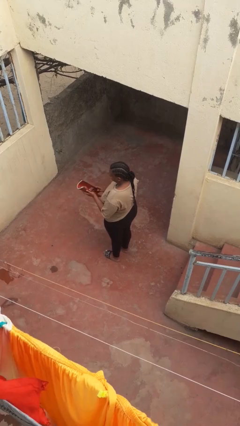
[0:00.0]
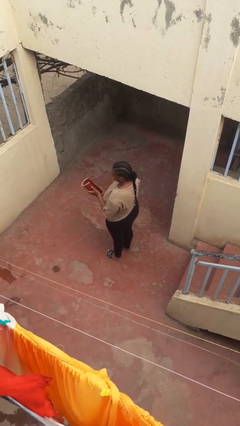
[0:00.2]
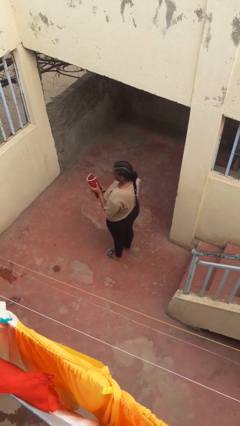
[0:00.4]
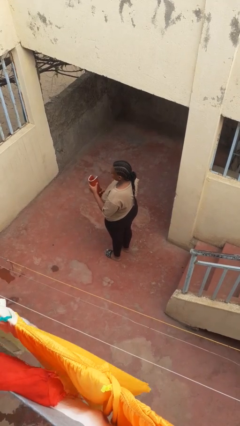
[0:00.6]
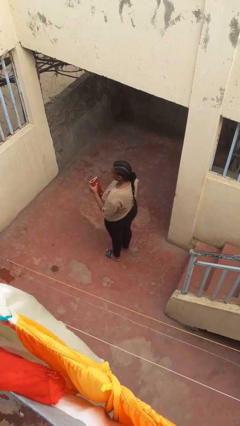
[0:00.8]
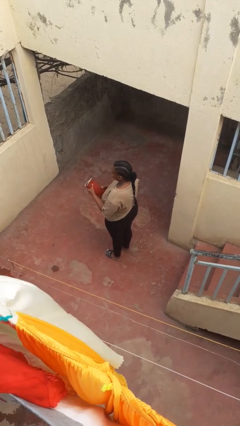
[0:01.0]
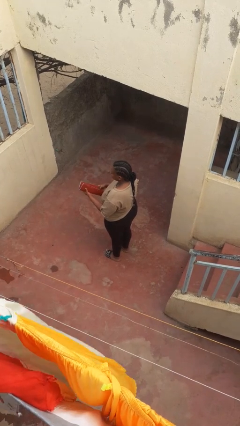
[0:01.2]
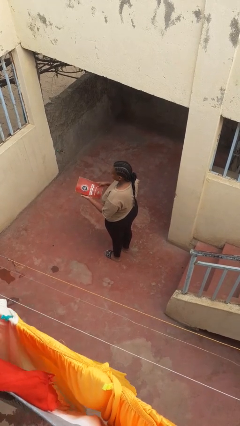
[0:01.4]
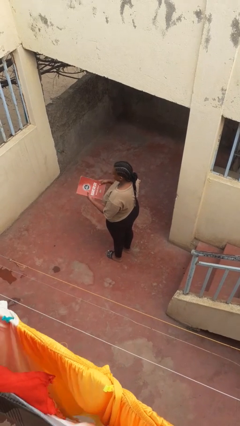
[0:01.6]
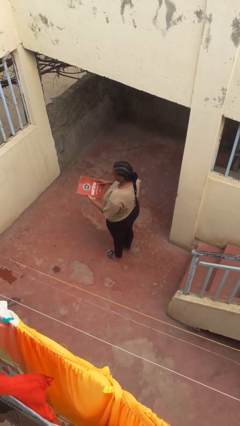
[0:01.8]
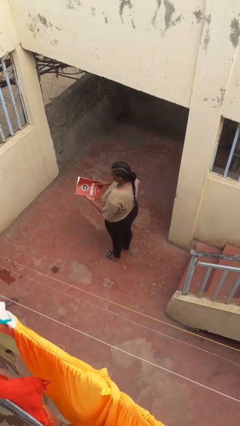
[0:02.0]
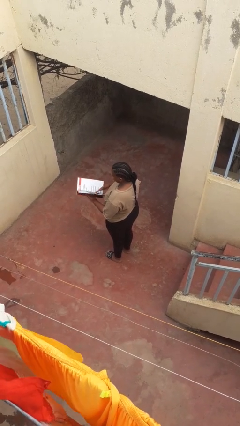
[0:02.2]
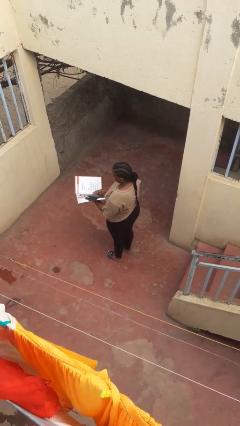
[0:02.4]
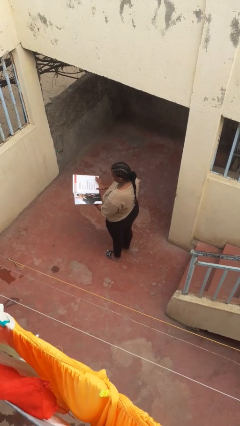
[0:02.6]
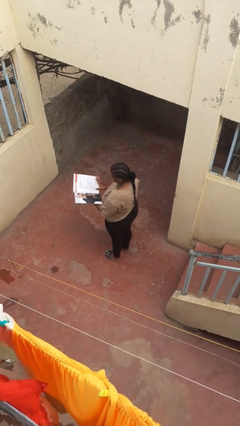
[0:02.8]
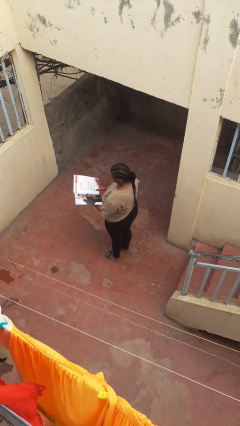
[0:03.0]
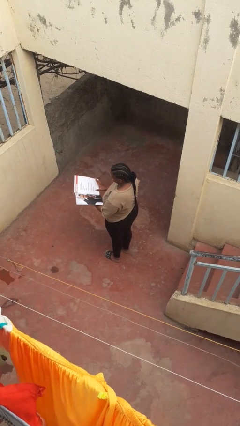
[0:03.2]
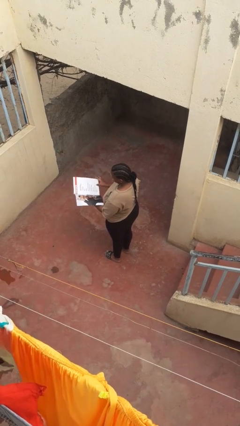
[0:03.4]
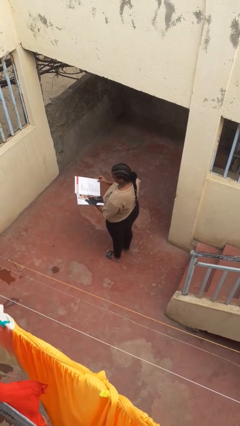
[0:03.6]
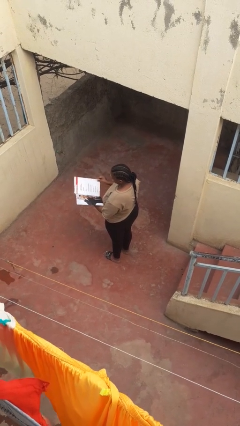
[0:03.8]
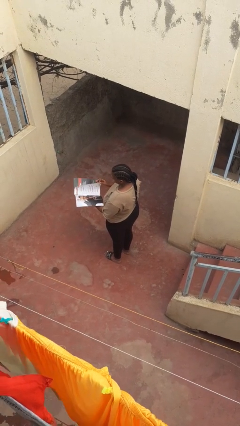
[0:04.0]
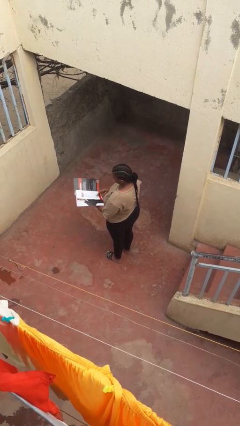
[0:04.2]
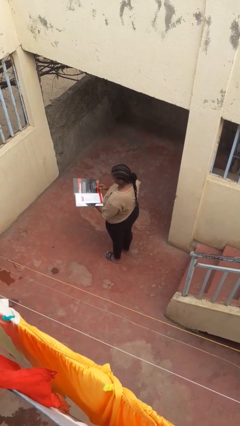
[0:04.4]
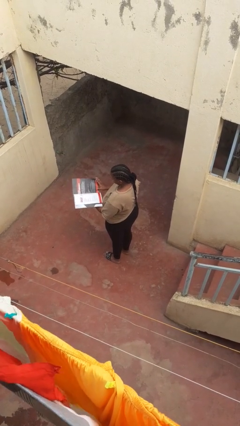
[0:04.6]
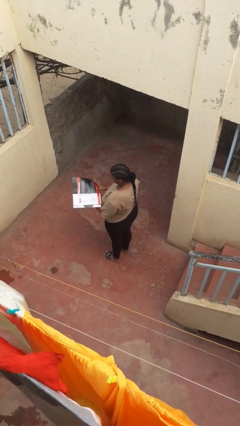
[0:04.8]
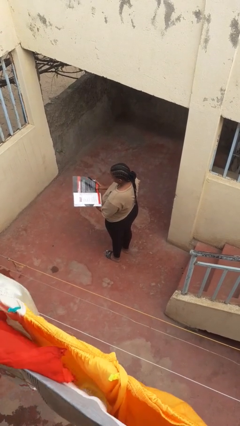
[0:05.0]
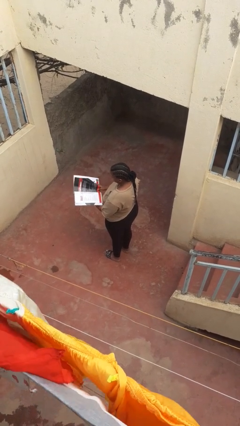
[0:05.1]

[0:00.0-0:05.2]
person reads magazine

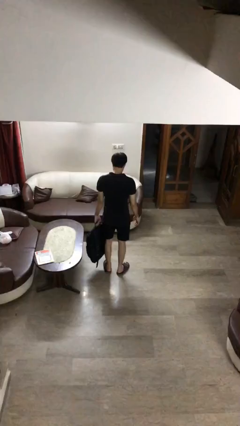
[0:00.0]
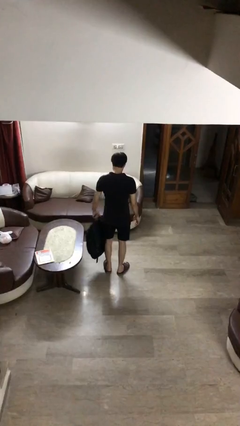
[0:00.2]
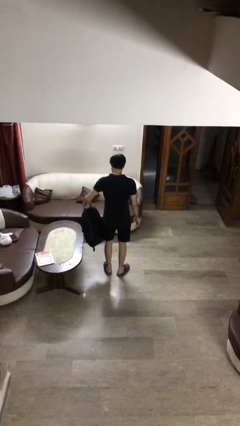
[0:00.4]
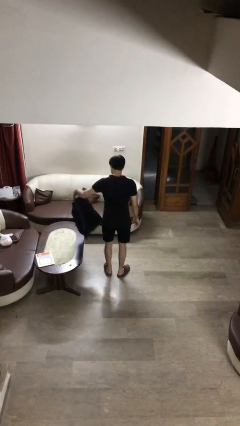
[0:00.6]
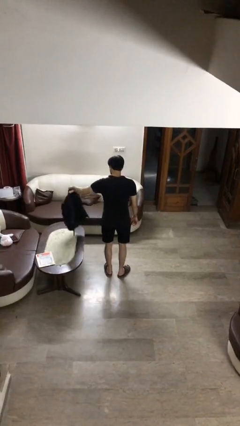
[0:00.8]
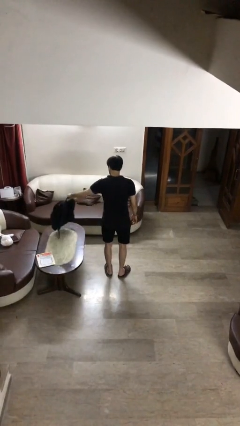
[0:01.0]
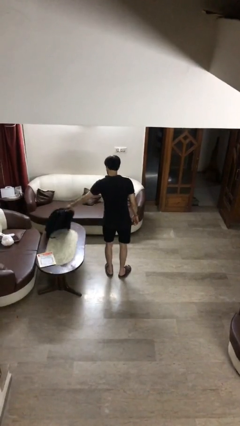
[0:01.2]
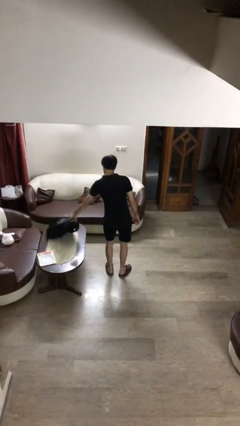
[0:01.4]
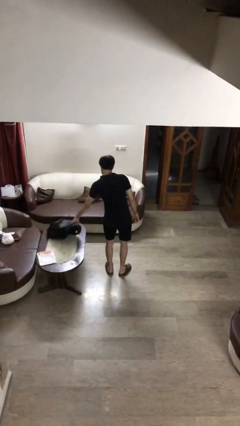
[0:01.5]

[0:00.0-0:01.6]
person puts down object on table

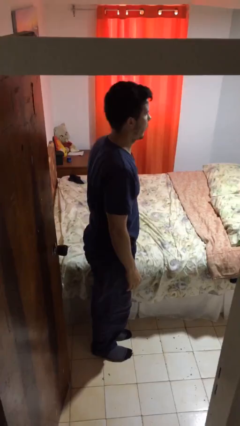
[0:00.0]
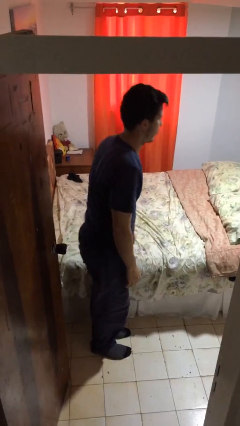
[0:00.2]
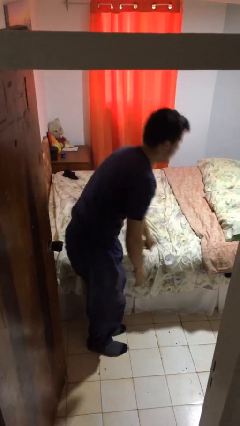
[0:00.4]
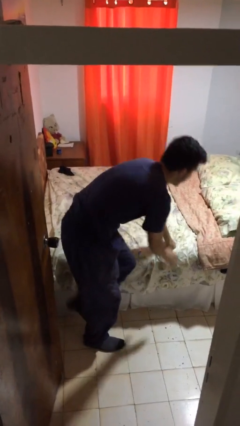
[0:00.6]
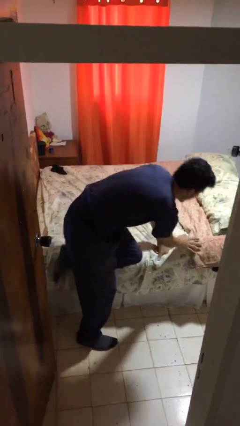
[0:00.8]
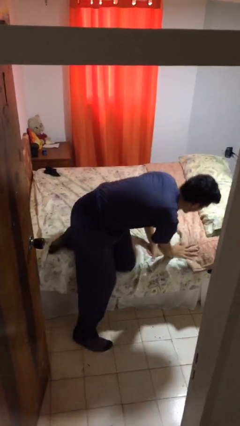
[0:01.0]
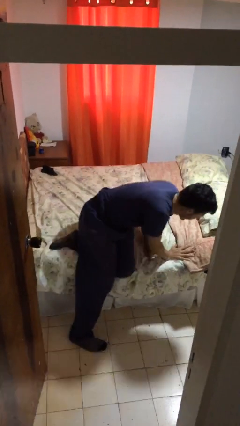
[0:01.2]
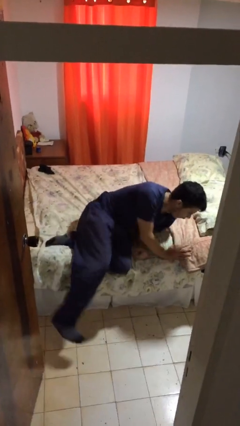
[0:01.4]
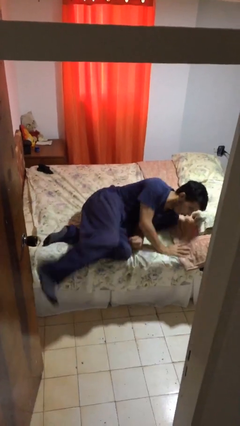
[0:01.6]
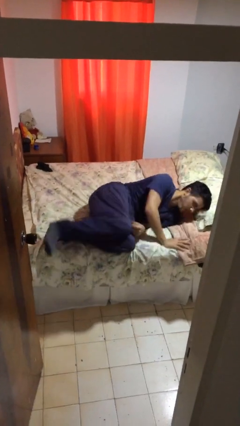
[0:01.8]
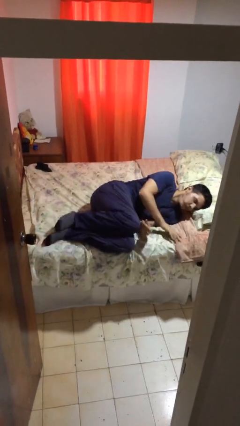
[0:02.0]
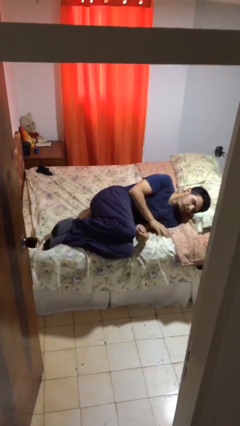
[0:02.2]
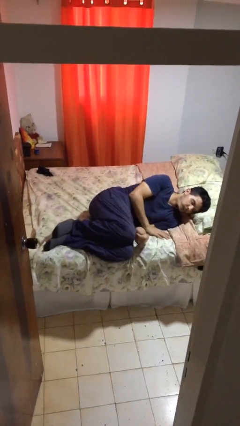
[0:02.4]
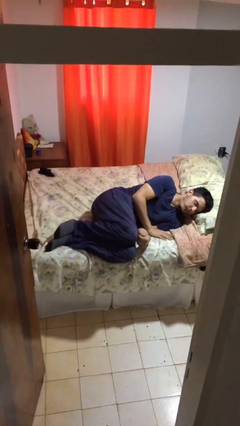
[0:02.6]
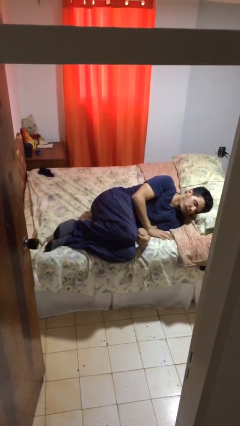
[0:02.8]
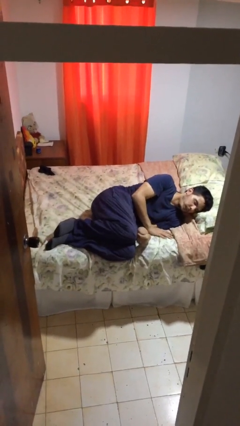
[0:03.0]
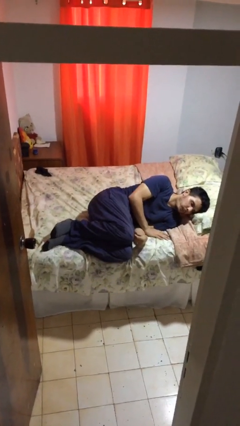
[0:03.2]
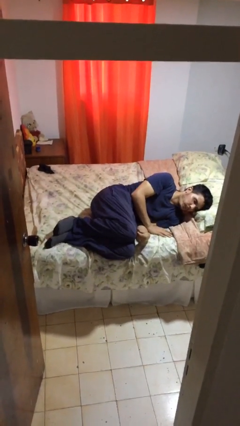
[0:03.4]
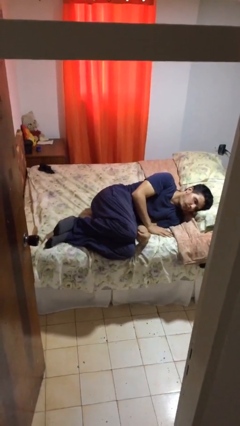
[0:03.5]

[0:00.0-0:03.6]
person lies down on bed

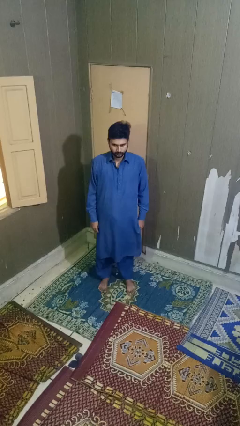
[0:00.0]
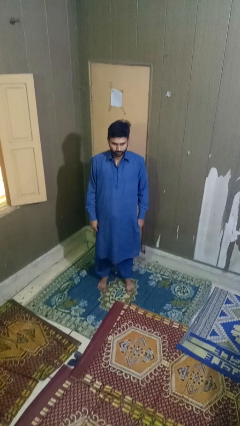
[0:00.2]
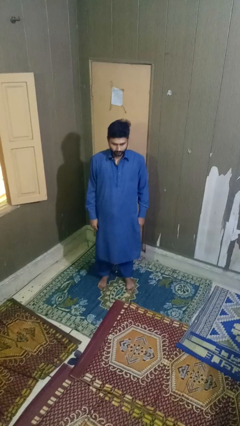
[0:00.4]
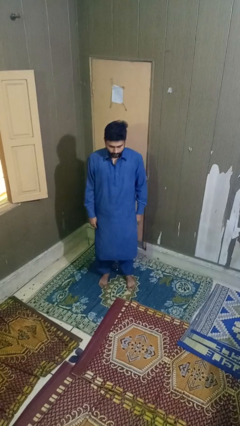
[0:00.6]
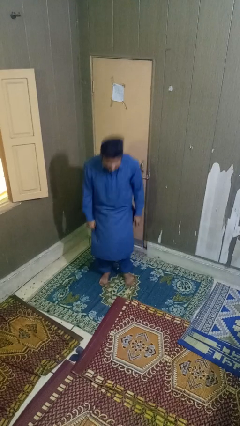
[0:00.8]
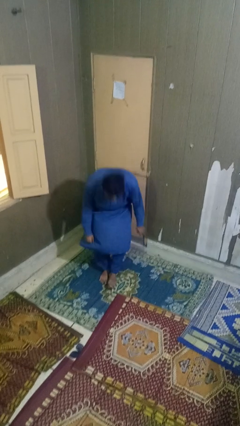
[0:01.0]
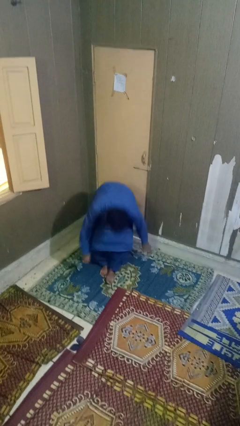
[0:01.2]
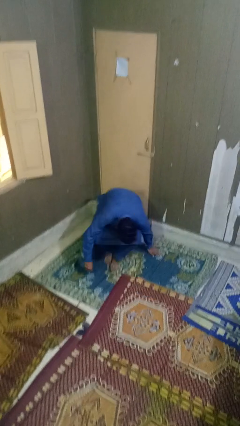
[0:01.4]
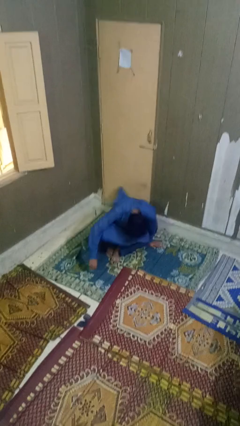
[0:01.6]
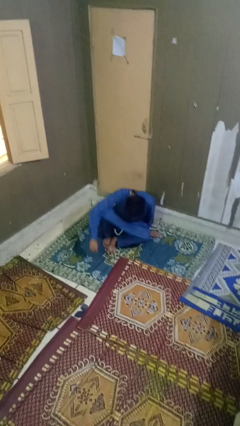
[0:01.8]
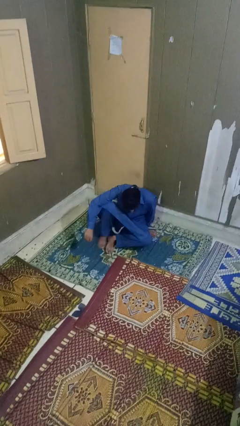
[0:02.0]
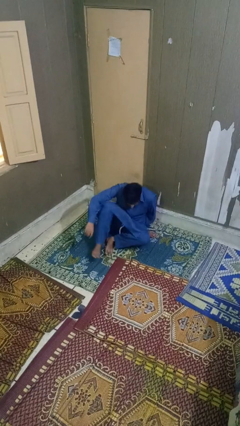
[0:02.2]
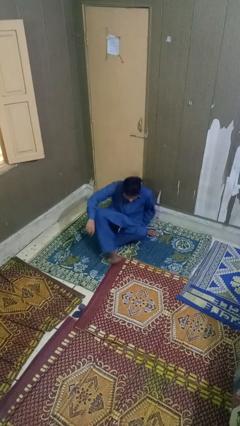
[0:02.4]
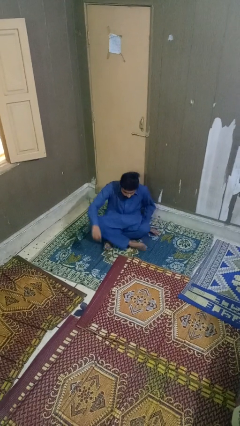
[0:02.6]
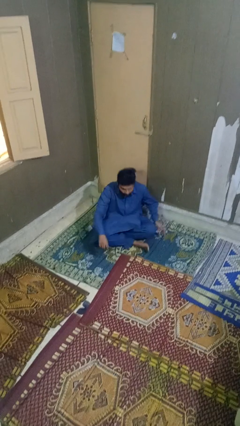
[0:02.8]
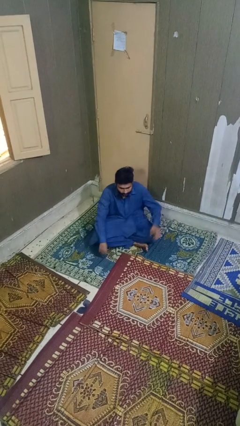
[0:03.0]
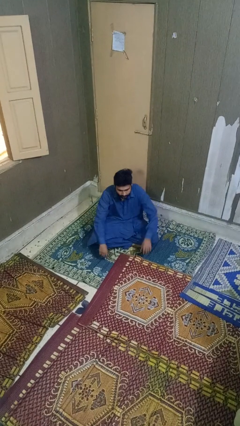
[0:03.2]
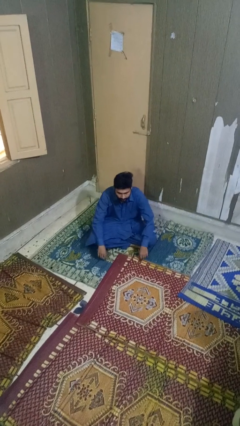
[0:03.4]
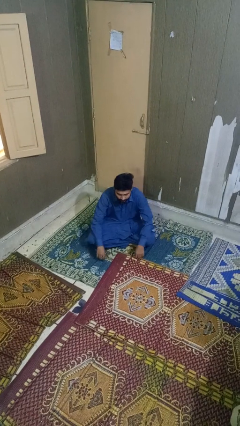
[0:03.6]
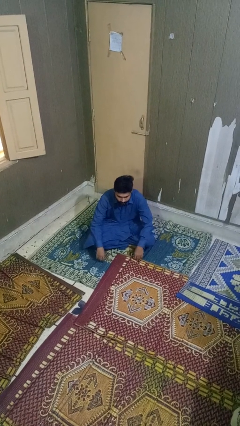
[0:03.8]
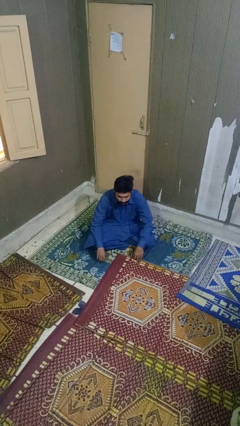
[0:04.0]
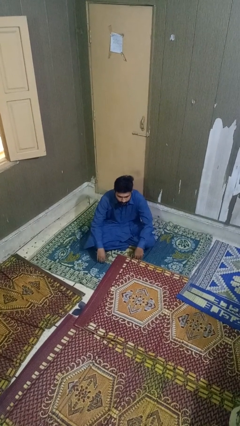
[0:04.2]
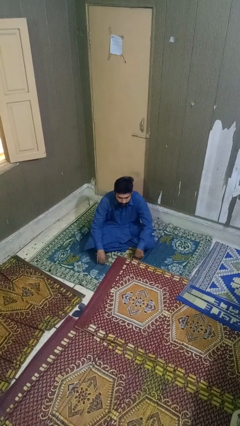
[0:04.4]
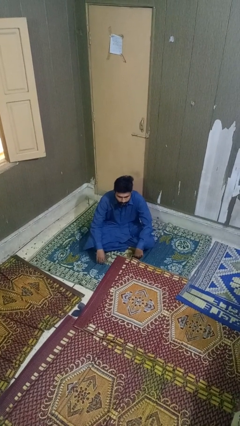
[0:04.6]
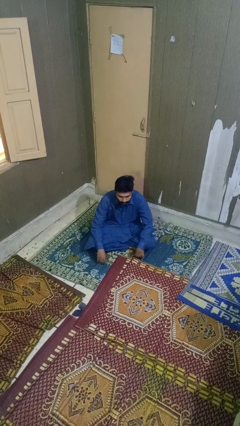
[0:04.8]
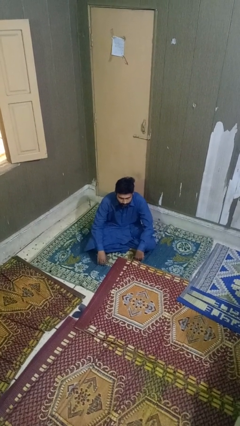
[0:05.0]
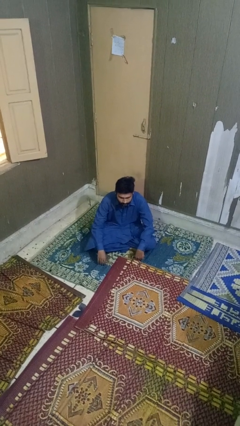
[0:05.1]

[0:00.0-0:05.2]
person sits crisscross

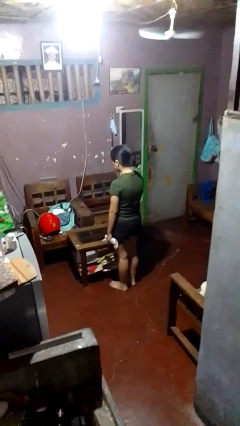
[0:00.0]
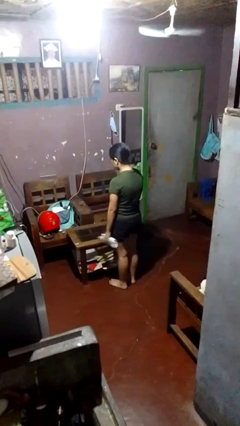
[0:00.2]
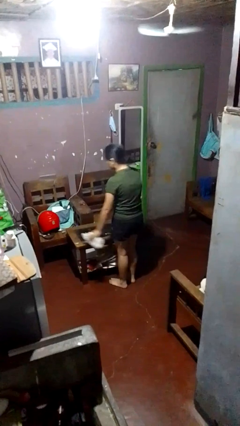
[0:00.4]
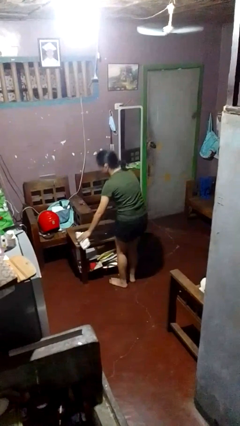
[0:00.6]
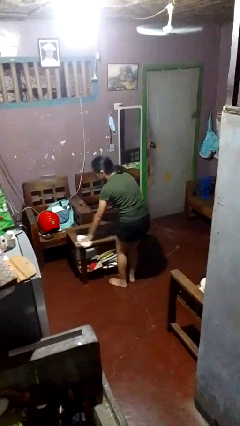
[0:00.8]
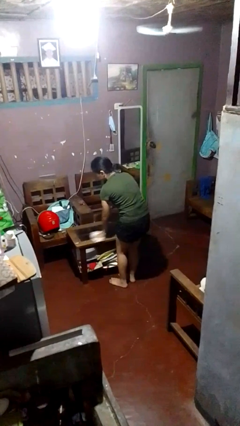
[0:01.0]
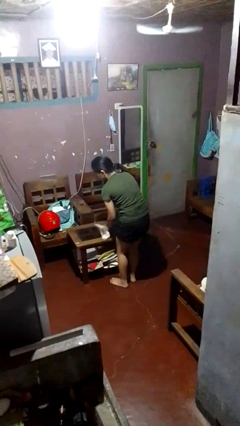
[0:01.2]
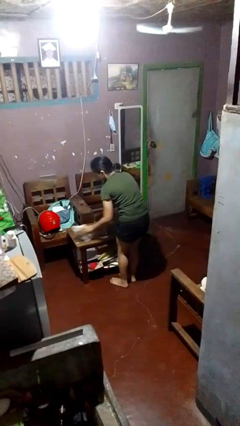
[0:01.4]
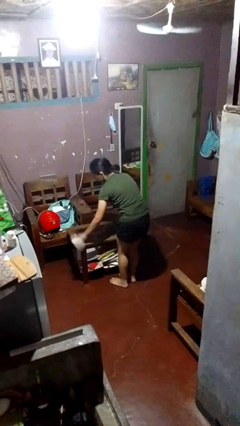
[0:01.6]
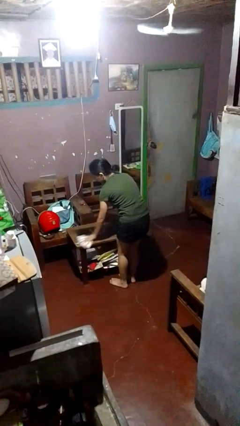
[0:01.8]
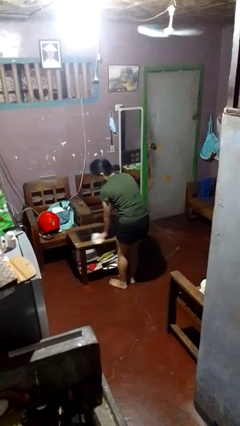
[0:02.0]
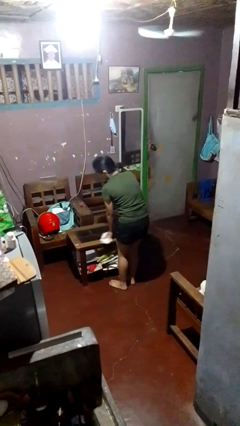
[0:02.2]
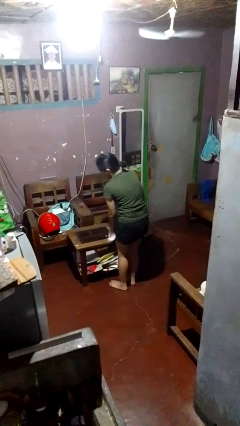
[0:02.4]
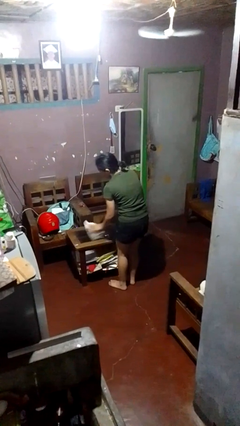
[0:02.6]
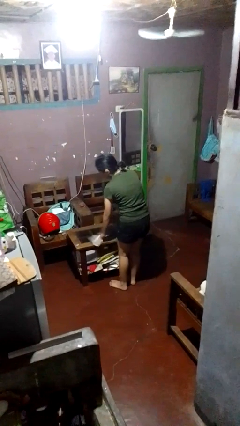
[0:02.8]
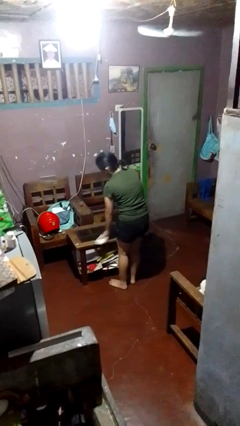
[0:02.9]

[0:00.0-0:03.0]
person cleans table with rag
